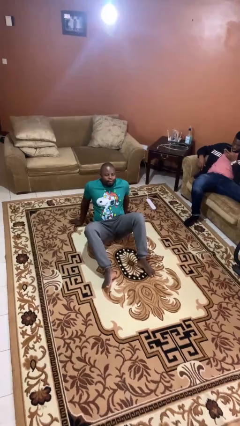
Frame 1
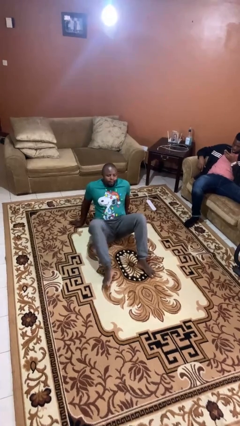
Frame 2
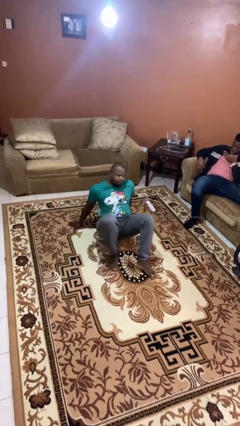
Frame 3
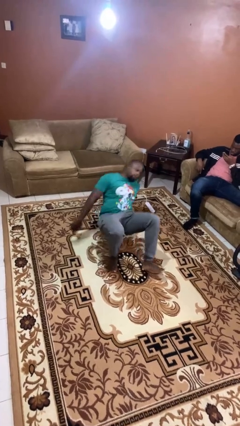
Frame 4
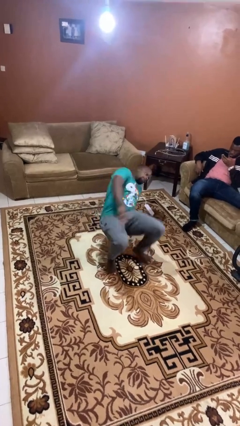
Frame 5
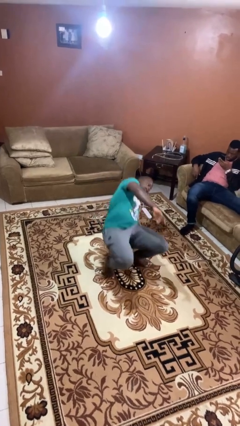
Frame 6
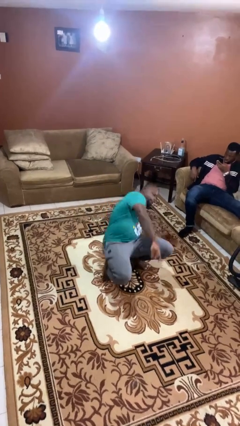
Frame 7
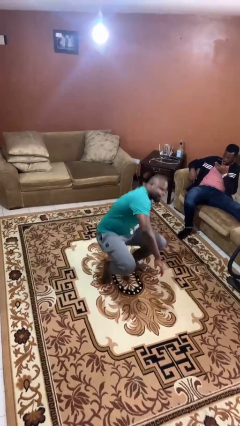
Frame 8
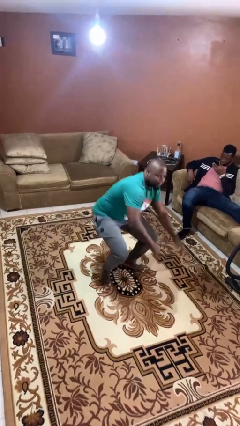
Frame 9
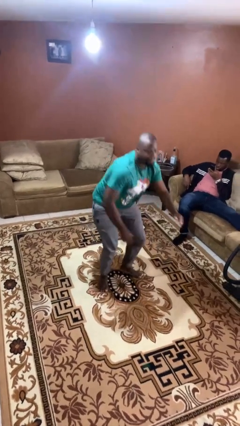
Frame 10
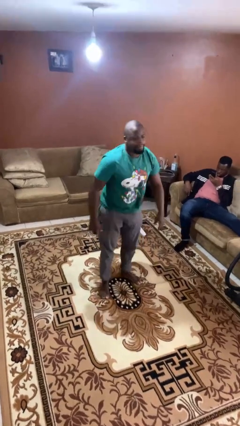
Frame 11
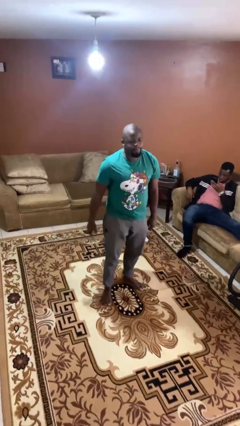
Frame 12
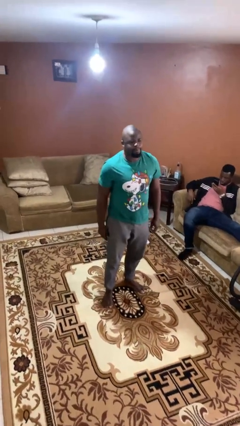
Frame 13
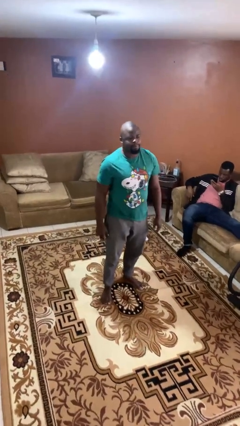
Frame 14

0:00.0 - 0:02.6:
person stands up

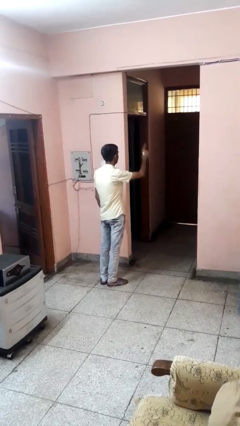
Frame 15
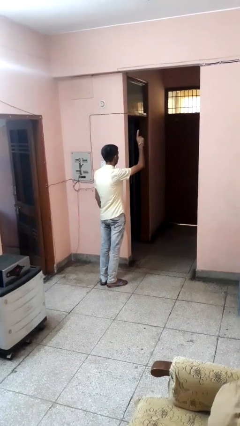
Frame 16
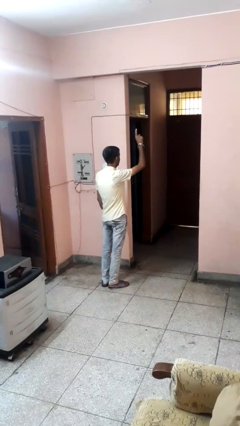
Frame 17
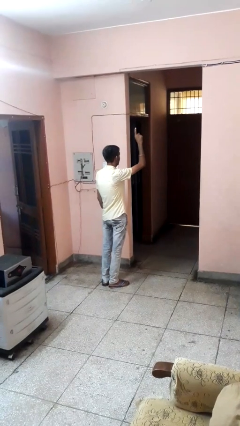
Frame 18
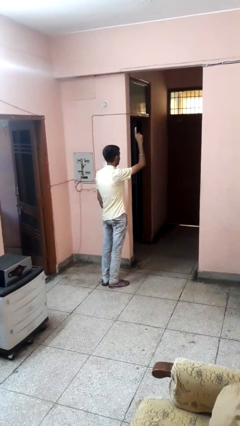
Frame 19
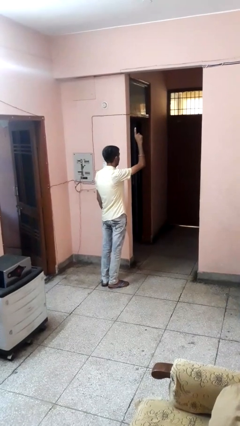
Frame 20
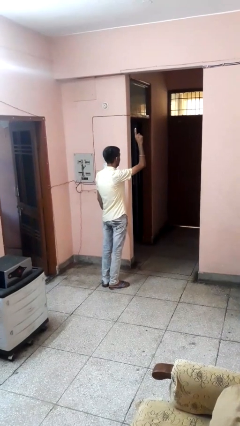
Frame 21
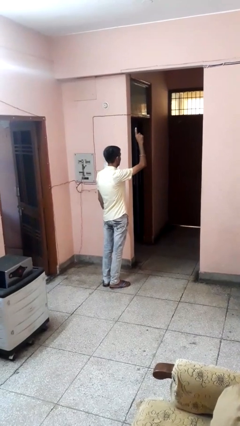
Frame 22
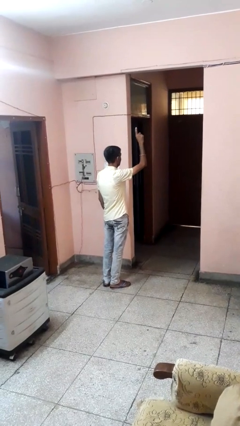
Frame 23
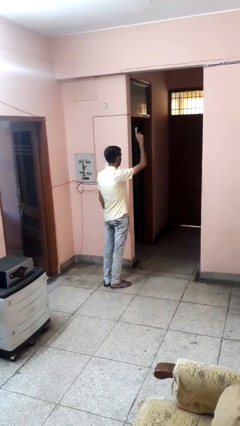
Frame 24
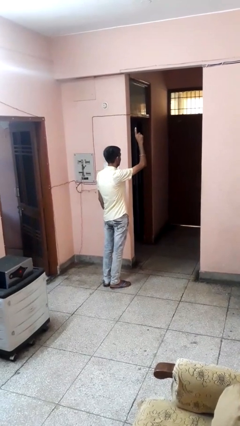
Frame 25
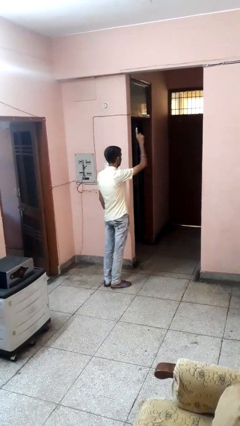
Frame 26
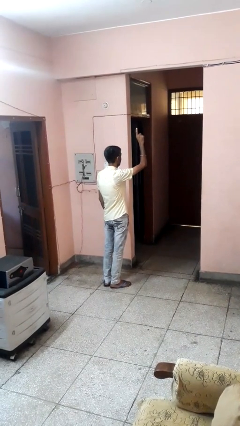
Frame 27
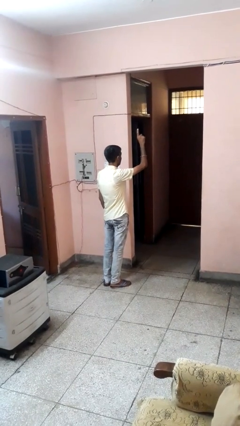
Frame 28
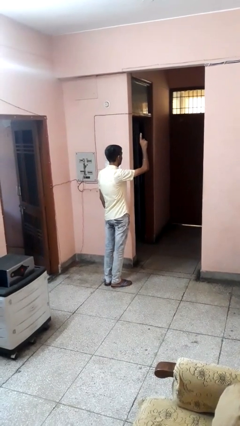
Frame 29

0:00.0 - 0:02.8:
person gestures raise hand

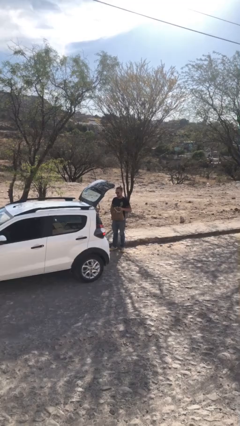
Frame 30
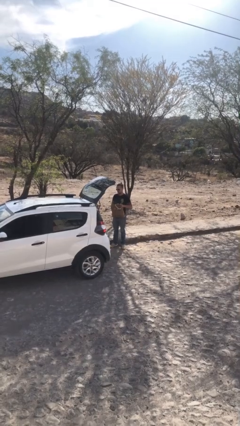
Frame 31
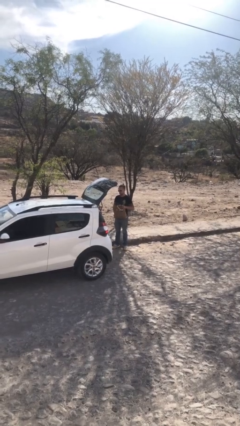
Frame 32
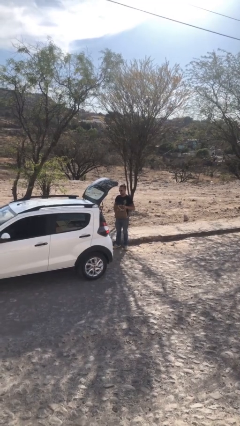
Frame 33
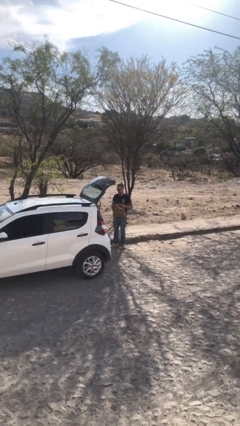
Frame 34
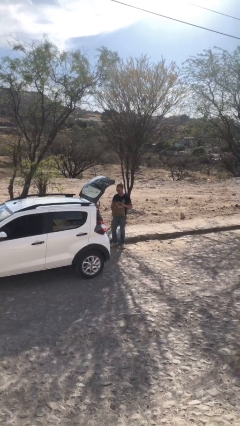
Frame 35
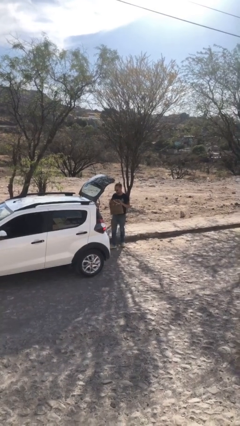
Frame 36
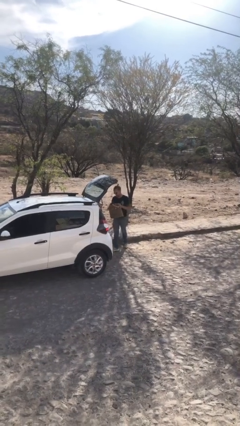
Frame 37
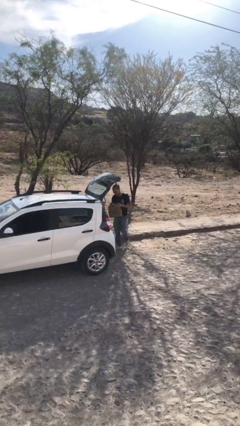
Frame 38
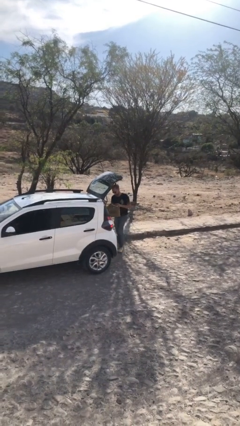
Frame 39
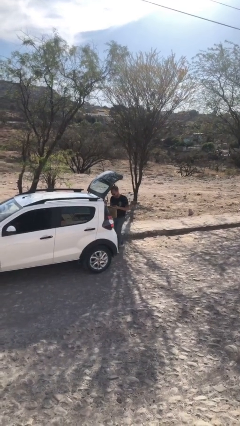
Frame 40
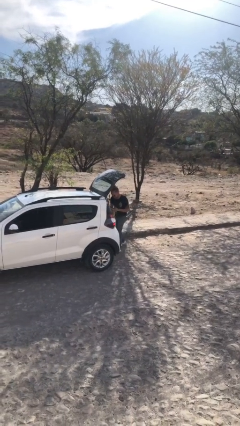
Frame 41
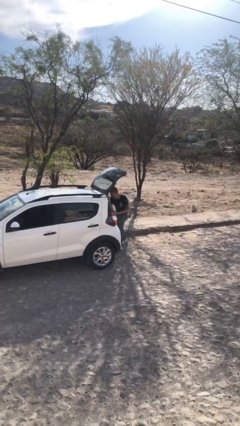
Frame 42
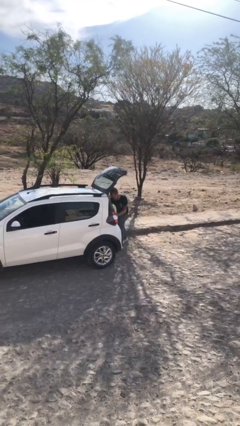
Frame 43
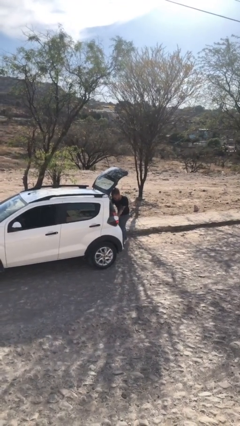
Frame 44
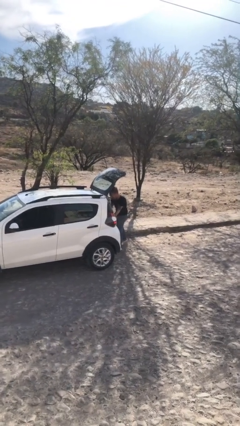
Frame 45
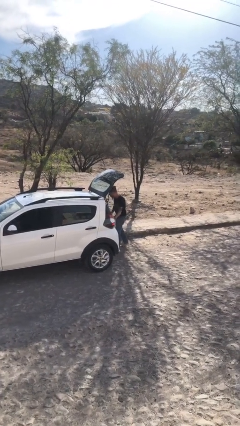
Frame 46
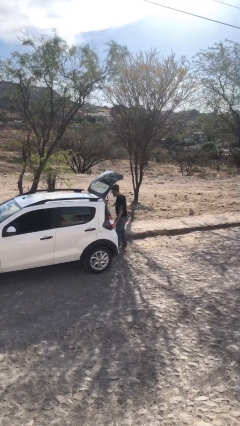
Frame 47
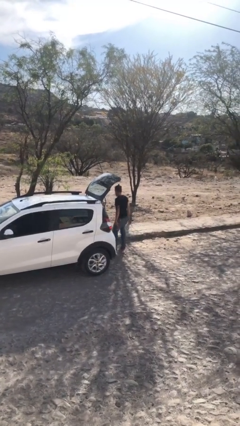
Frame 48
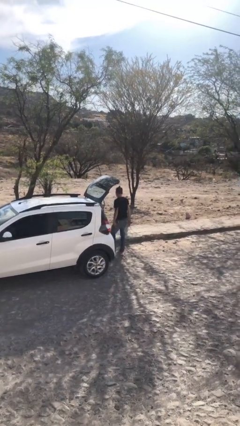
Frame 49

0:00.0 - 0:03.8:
person loads car

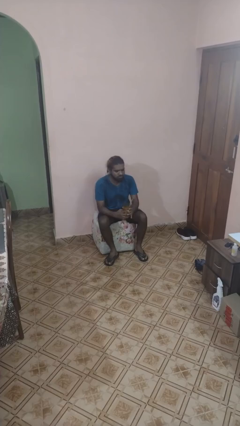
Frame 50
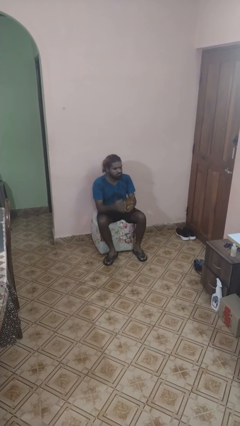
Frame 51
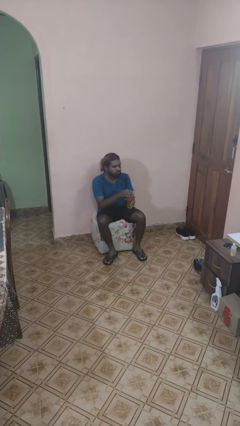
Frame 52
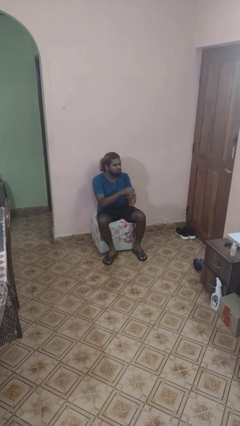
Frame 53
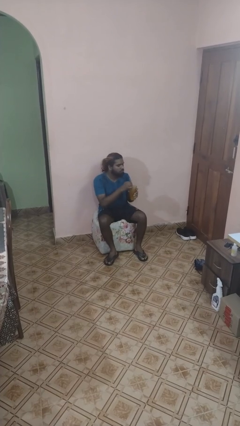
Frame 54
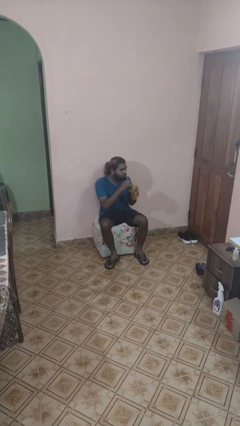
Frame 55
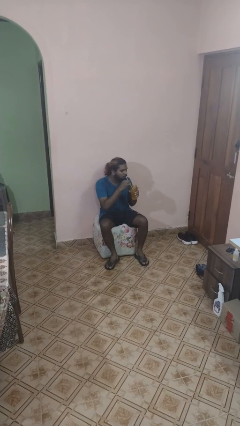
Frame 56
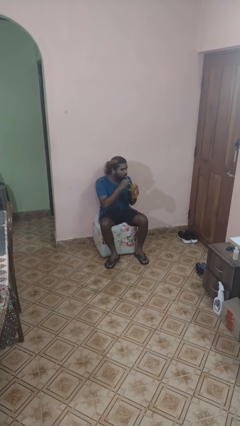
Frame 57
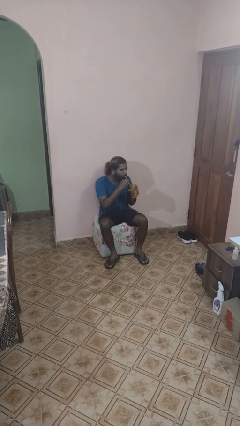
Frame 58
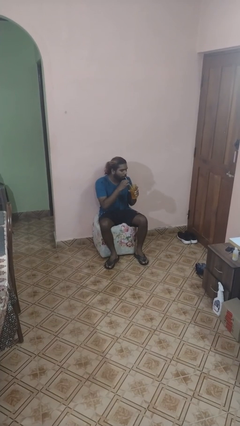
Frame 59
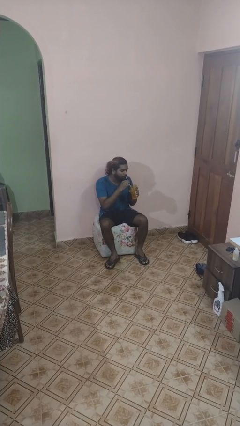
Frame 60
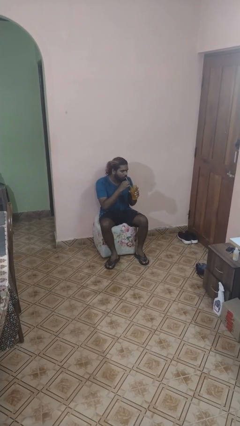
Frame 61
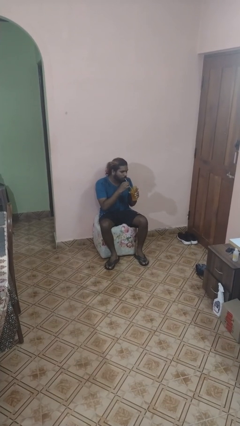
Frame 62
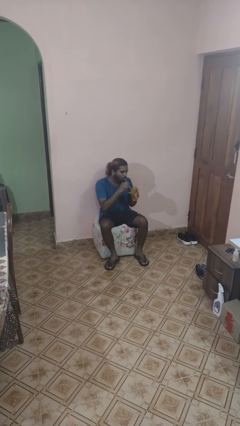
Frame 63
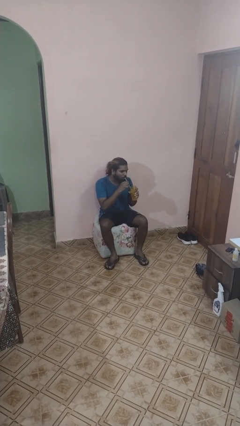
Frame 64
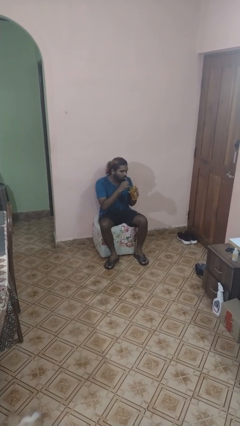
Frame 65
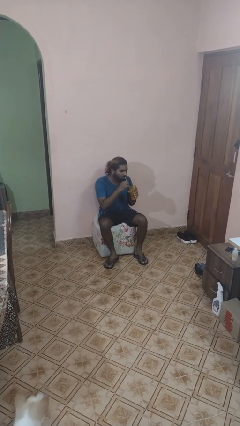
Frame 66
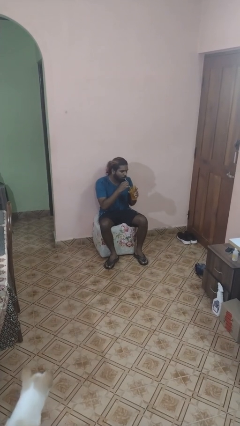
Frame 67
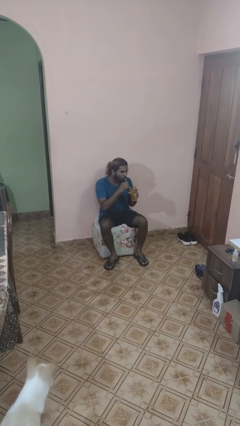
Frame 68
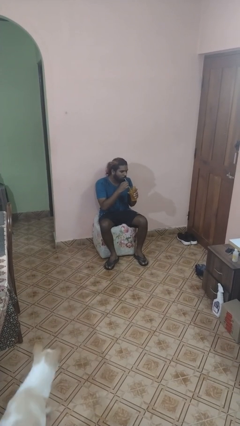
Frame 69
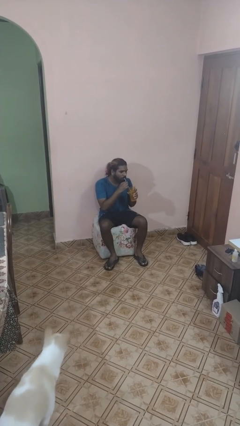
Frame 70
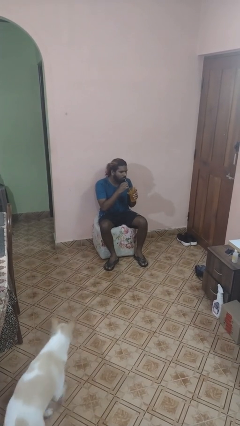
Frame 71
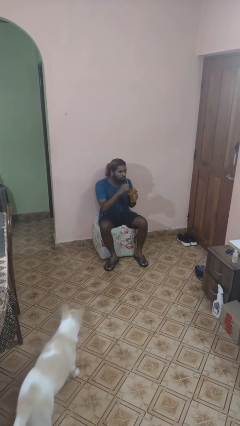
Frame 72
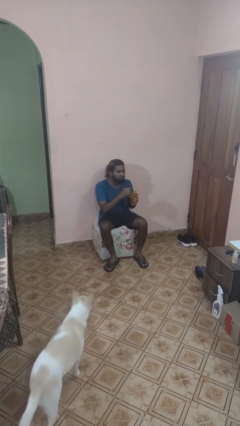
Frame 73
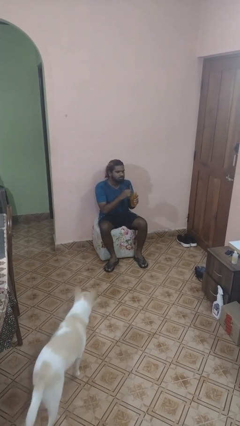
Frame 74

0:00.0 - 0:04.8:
person drinks from straw

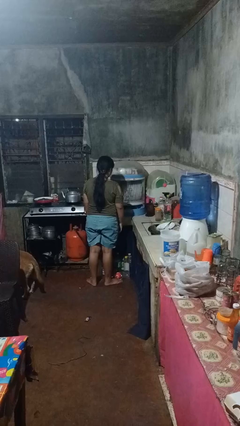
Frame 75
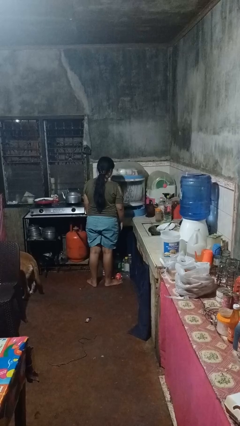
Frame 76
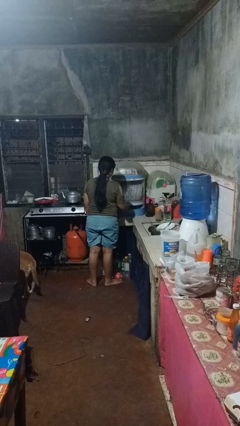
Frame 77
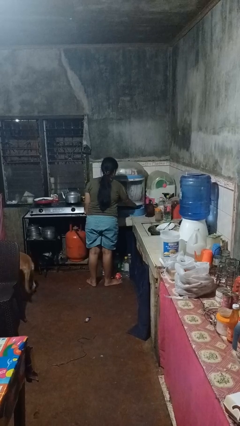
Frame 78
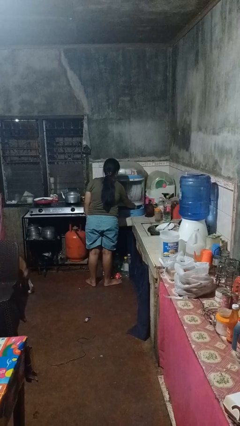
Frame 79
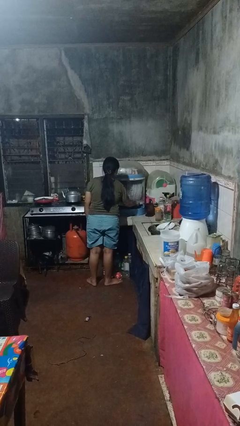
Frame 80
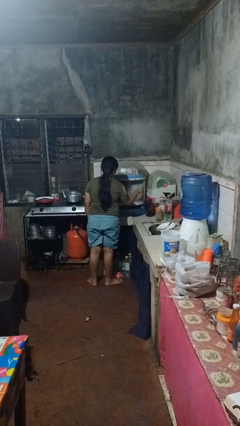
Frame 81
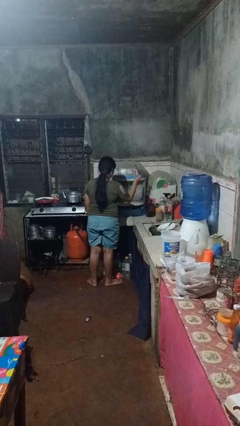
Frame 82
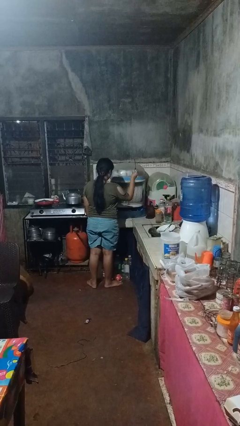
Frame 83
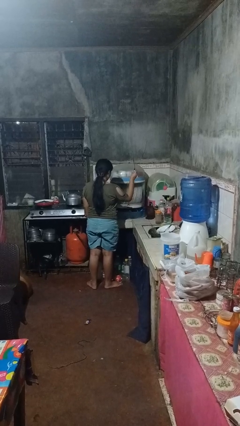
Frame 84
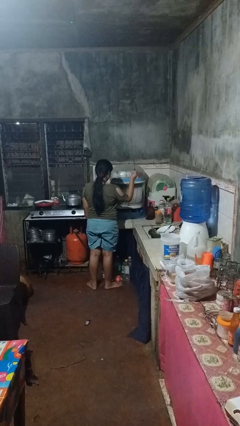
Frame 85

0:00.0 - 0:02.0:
person takes object from kitchen drawer

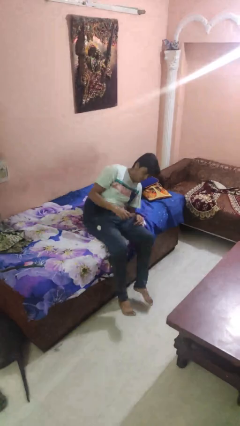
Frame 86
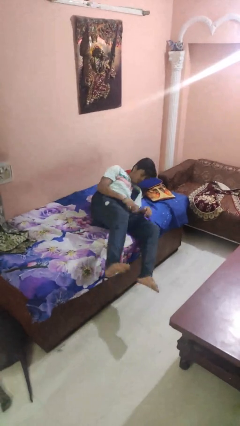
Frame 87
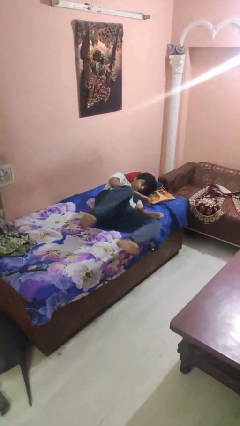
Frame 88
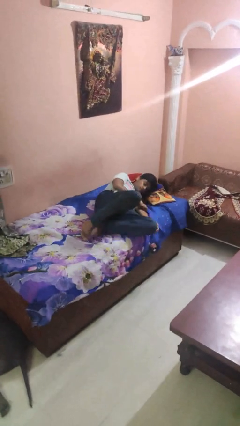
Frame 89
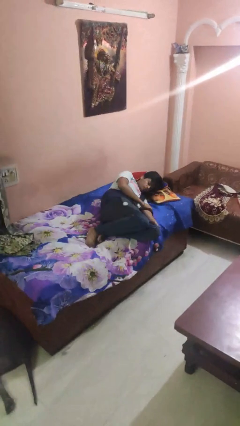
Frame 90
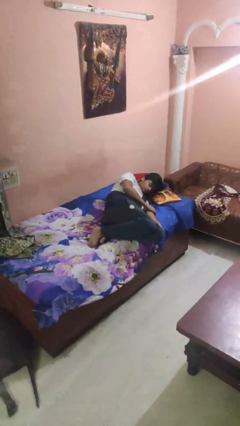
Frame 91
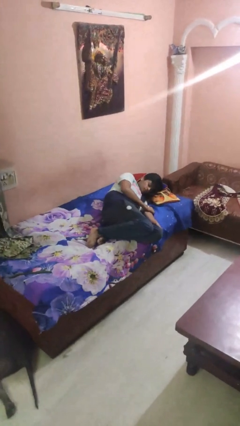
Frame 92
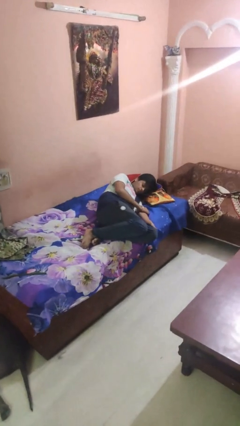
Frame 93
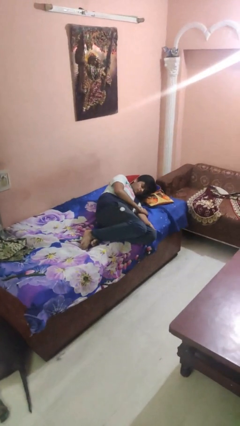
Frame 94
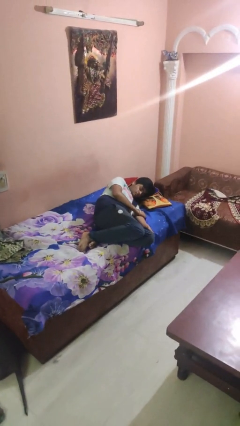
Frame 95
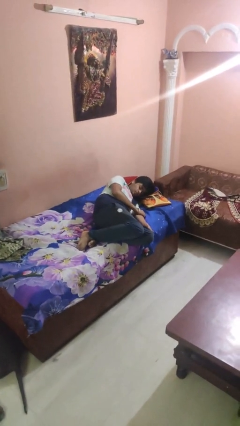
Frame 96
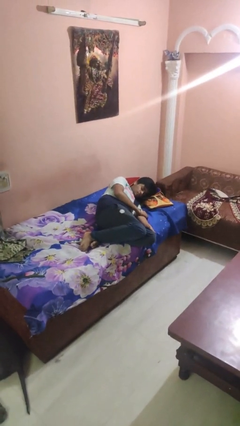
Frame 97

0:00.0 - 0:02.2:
person lies down on bed
